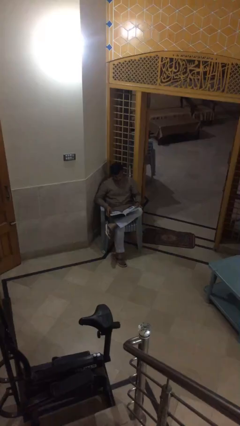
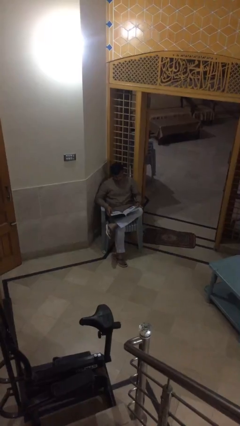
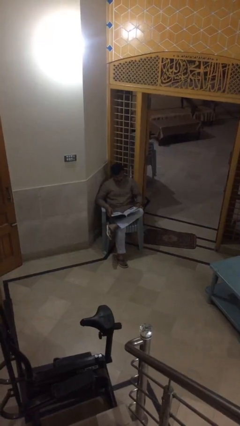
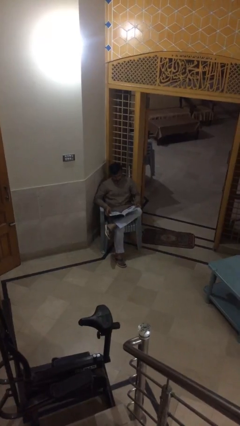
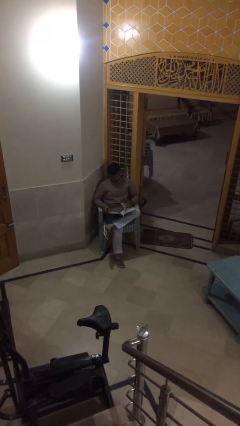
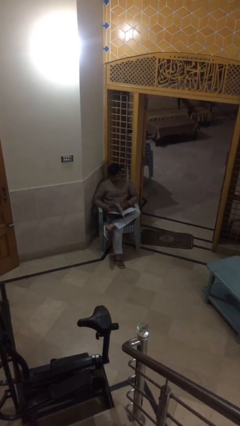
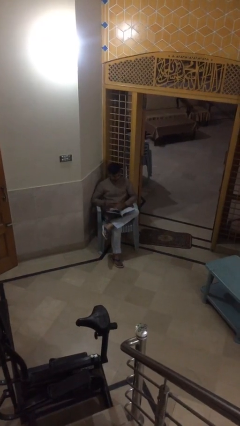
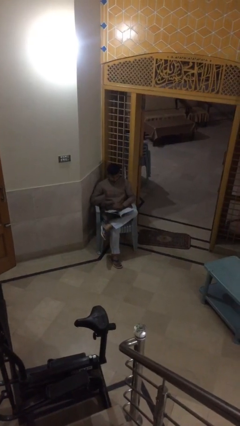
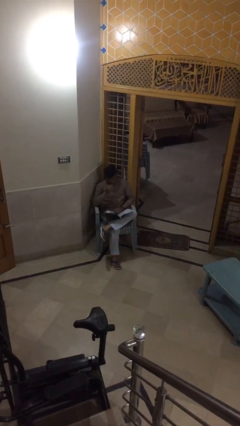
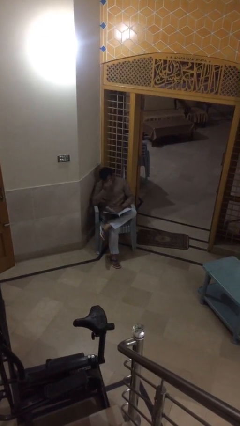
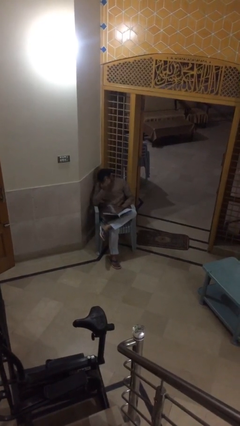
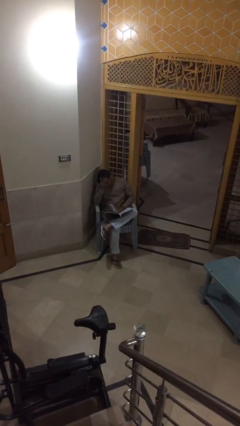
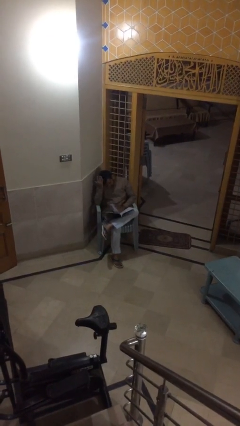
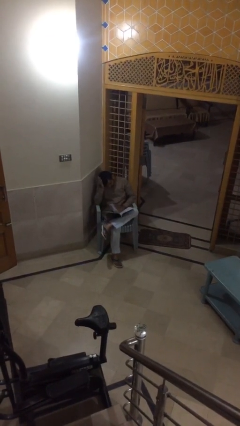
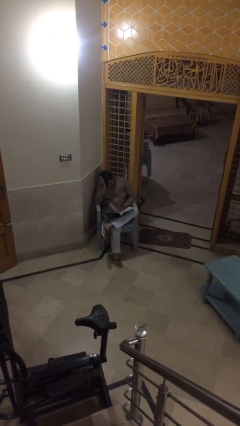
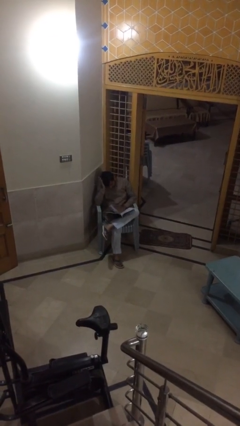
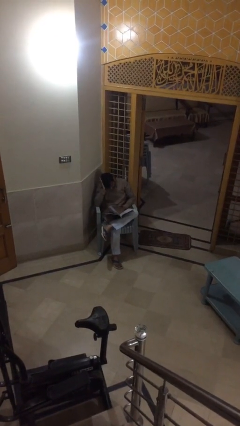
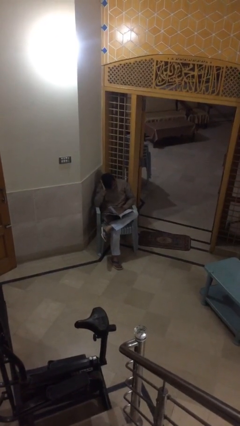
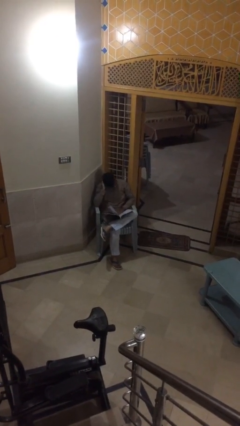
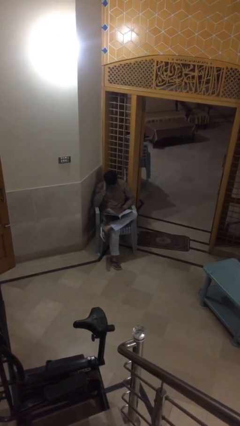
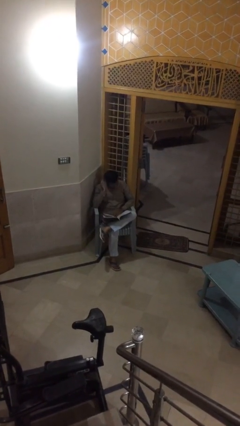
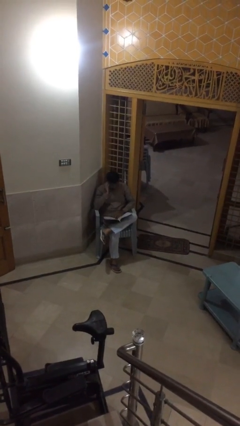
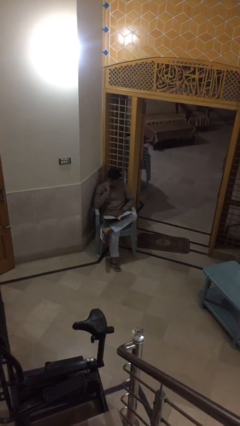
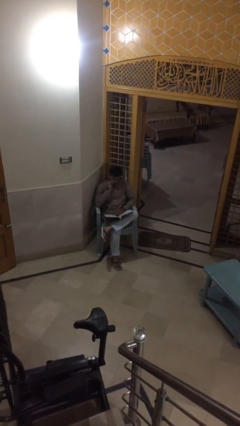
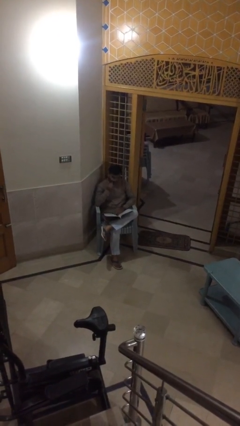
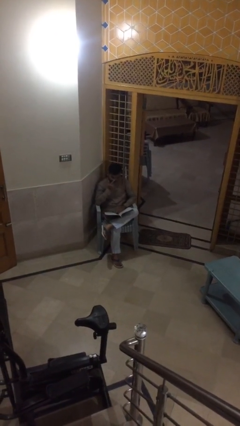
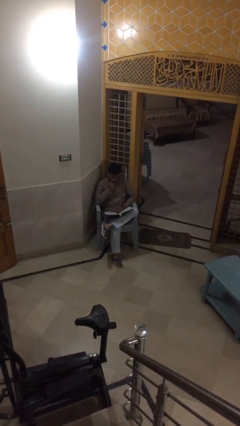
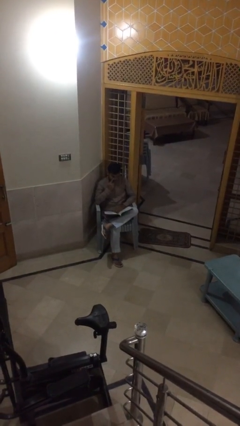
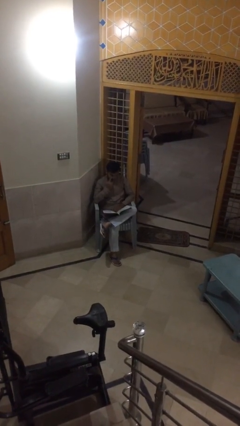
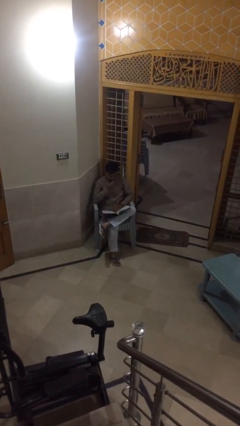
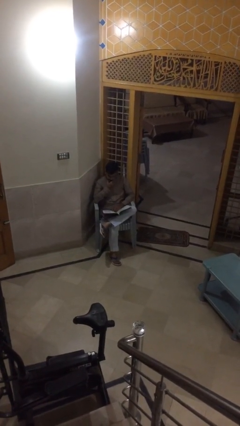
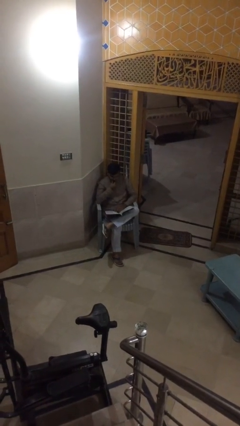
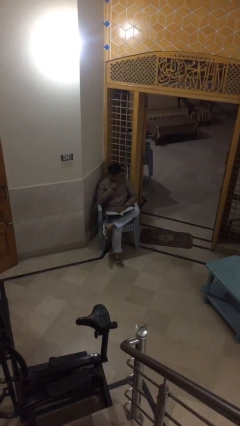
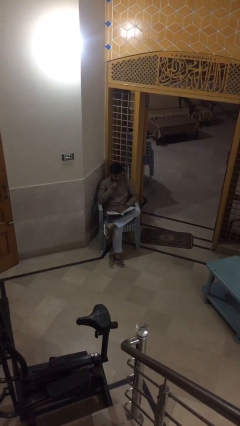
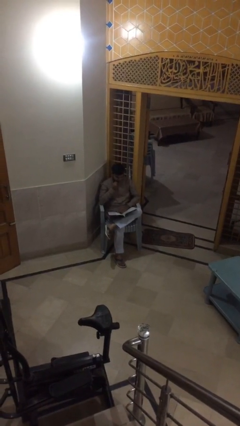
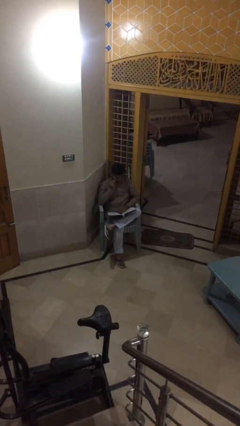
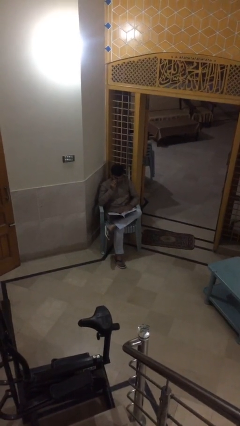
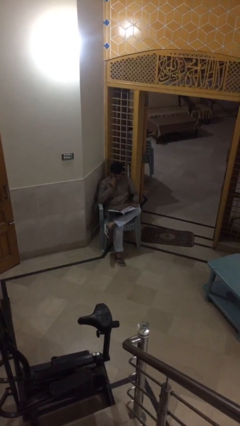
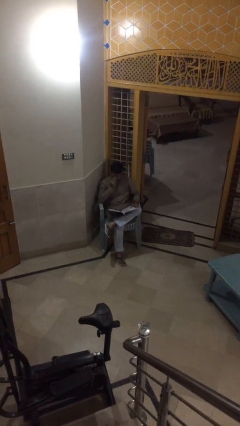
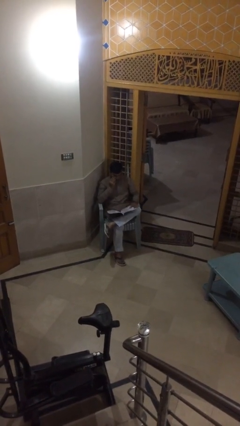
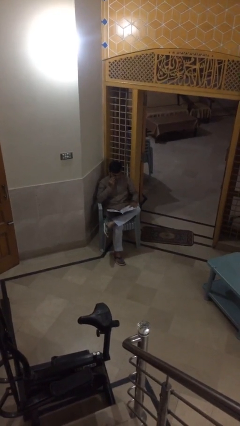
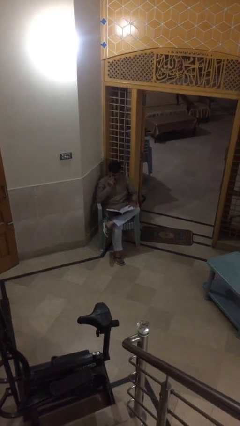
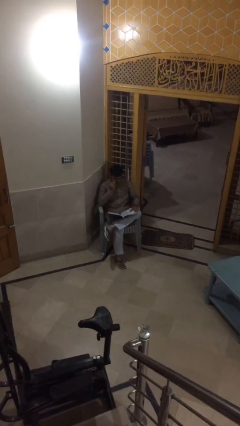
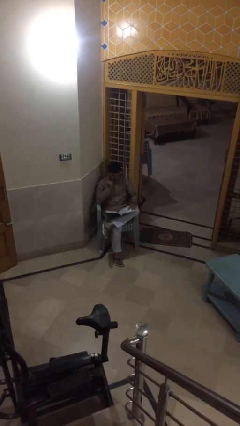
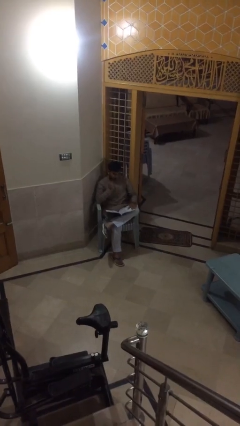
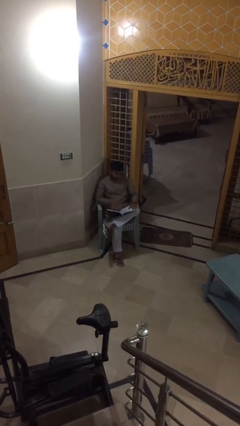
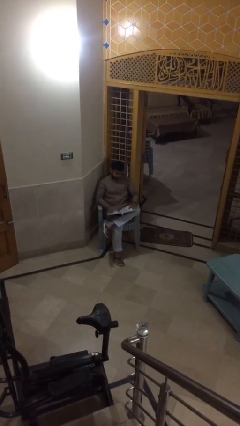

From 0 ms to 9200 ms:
person reads document

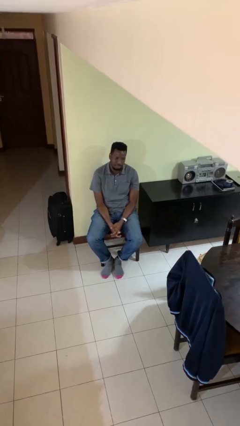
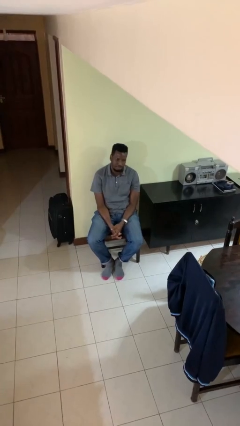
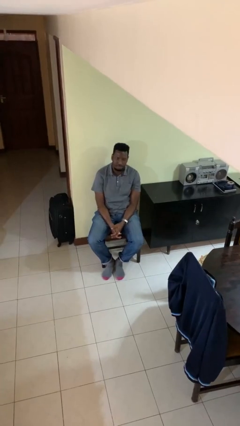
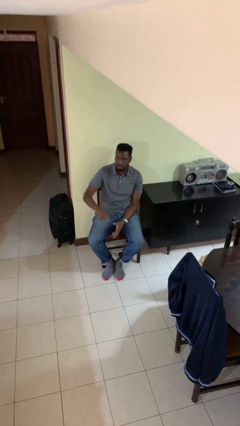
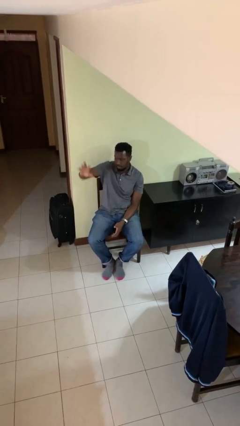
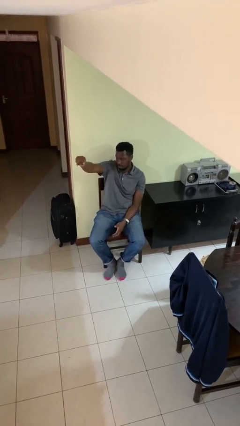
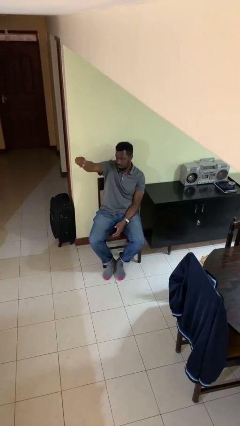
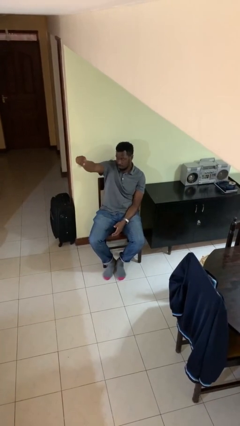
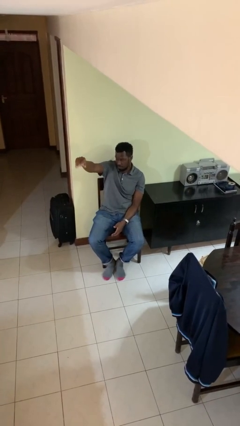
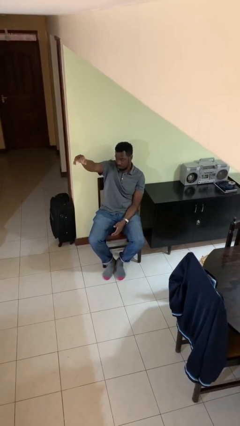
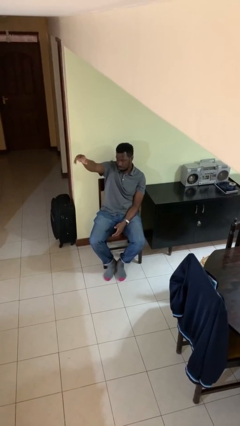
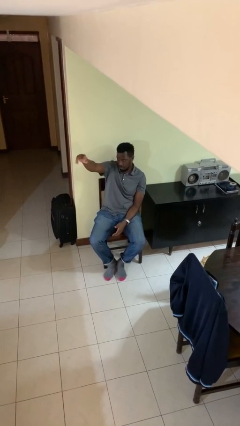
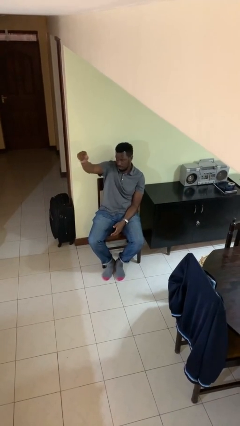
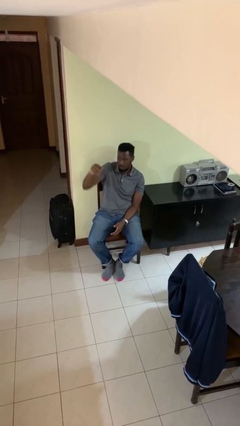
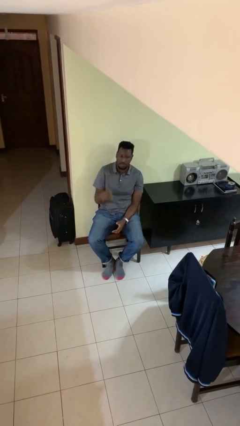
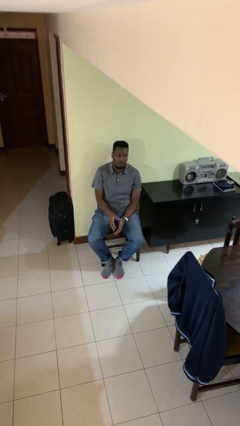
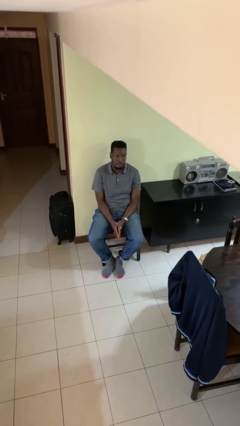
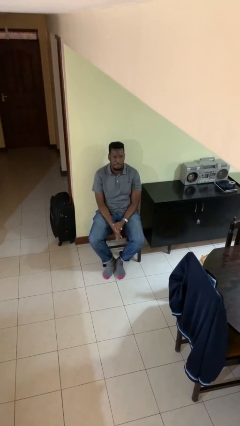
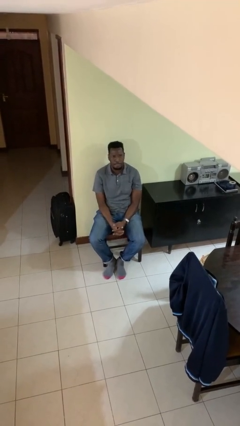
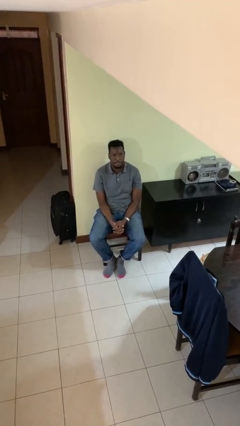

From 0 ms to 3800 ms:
person gestures come here

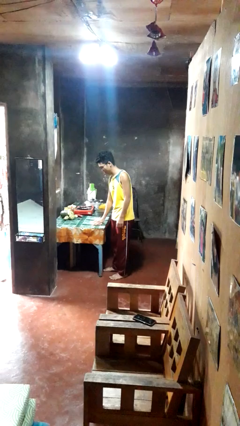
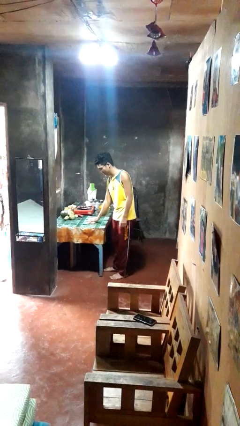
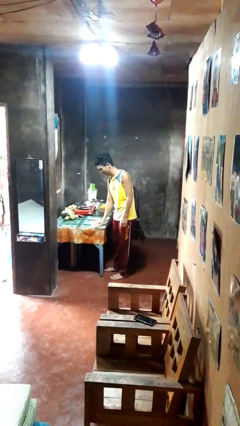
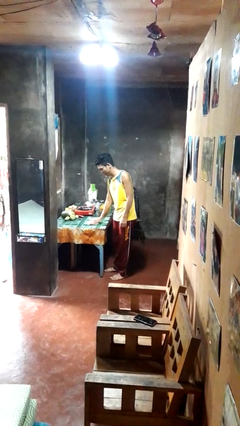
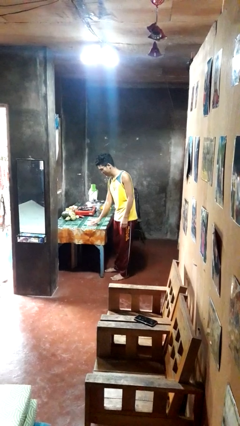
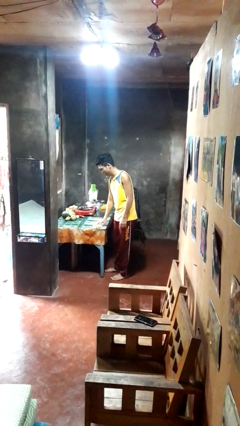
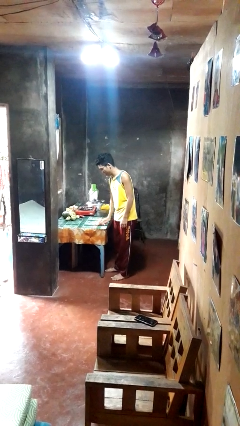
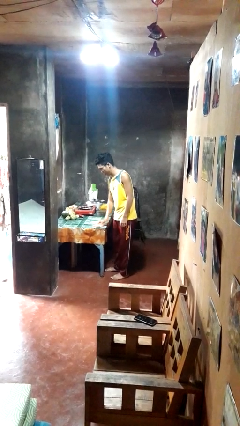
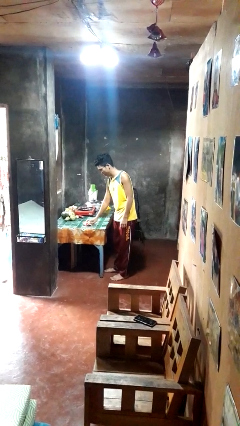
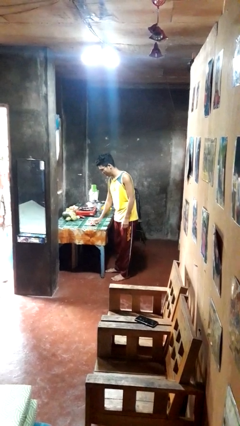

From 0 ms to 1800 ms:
person cleans table with rag

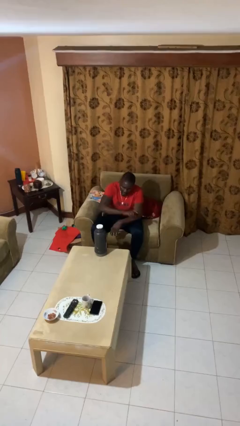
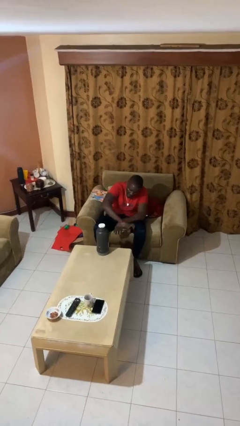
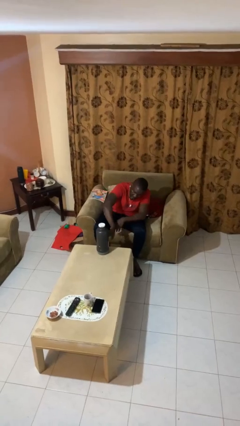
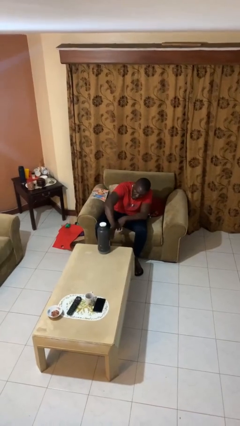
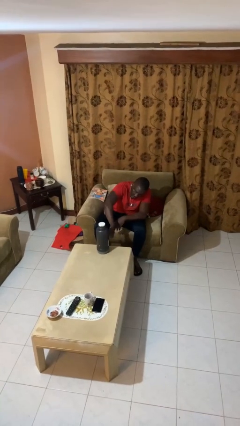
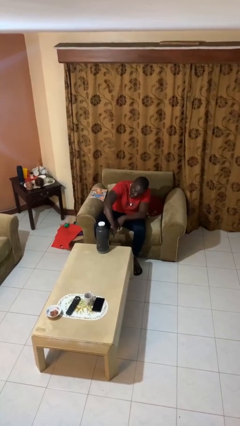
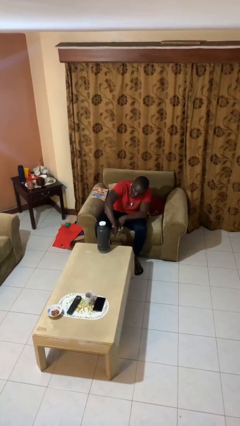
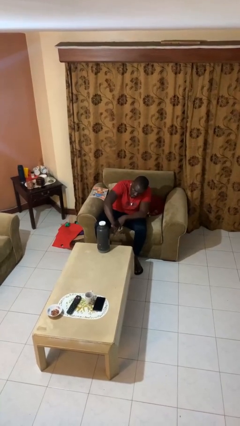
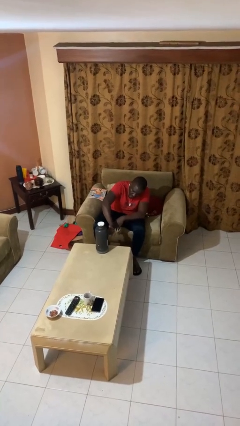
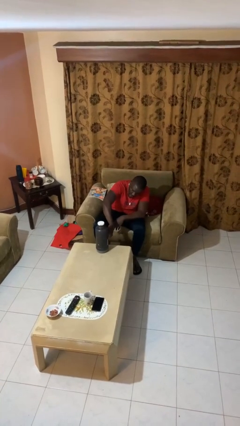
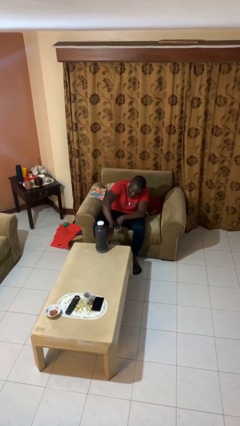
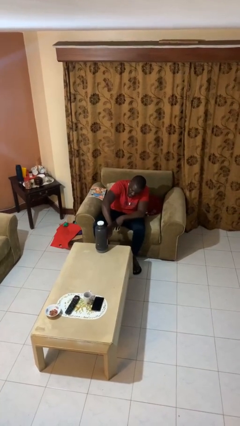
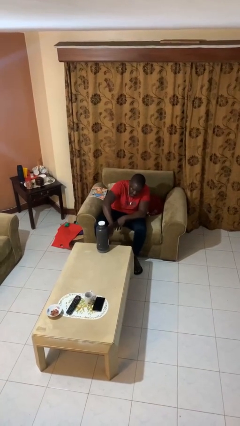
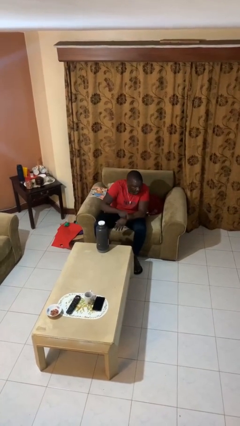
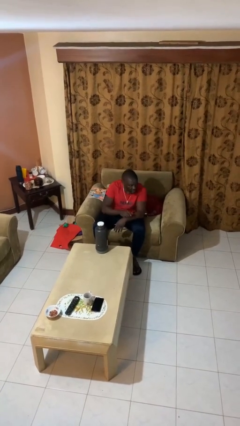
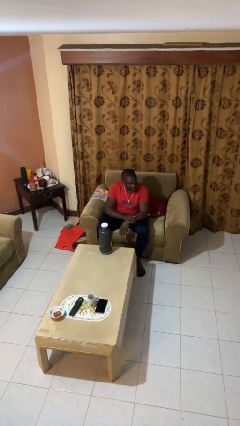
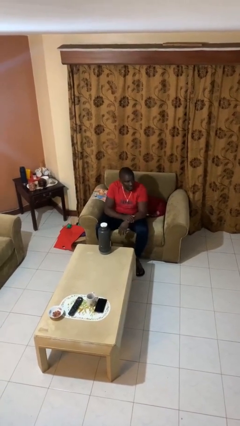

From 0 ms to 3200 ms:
person taps object with finger
